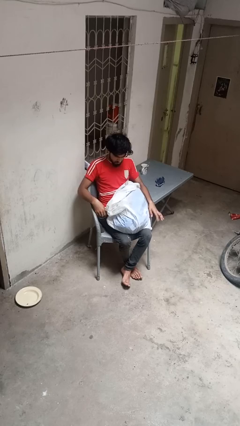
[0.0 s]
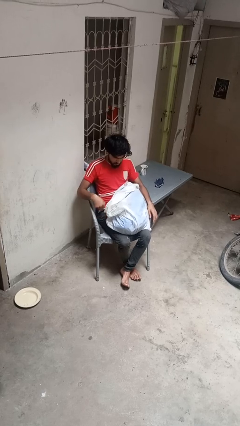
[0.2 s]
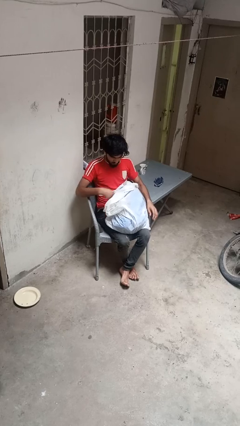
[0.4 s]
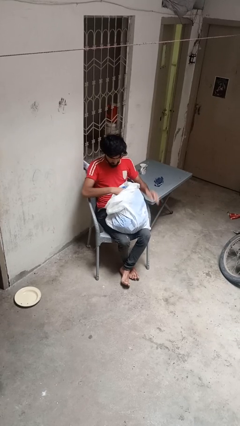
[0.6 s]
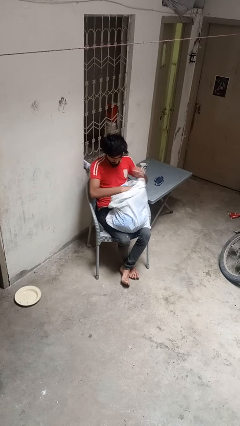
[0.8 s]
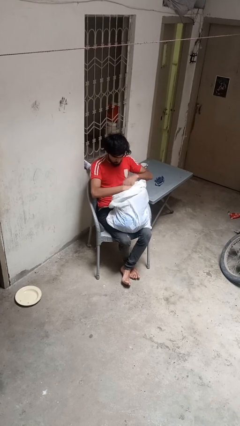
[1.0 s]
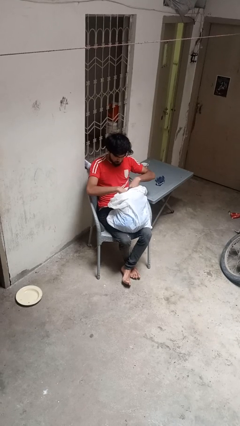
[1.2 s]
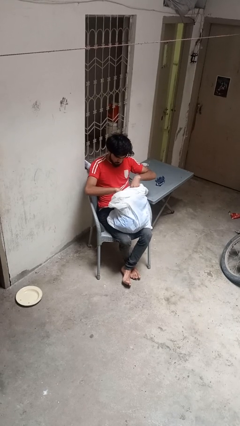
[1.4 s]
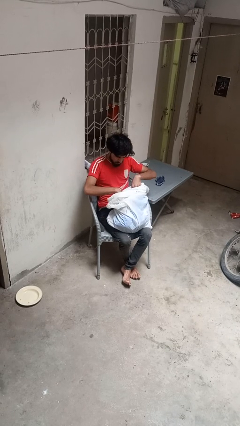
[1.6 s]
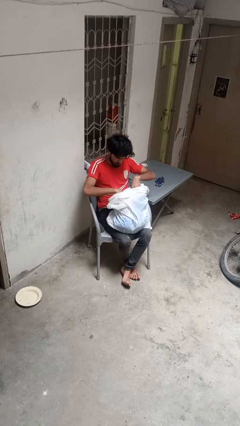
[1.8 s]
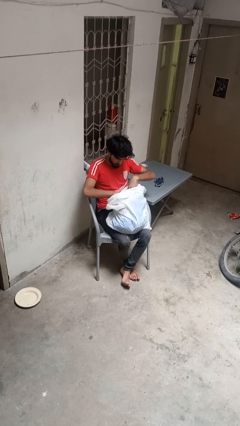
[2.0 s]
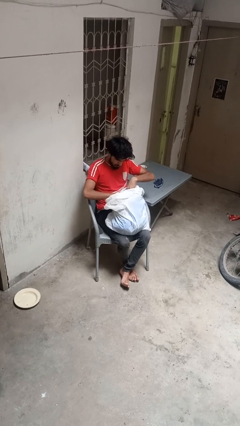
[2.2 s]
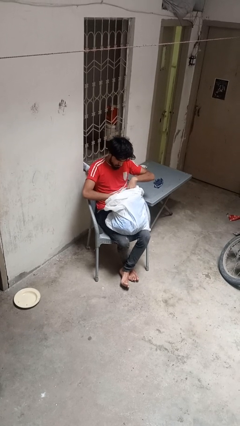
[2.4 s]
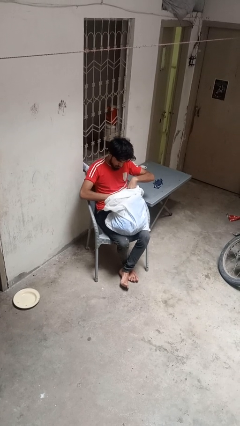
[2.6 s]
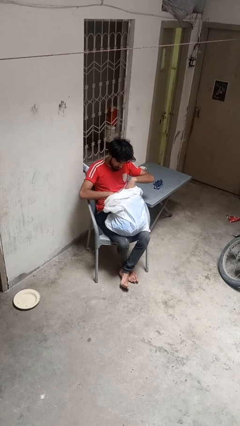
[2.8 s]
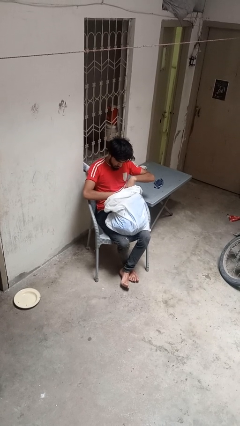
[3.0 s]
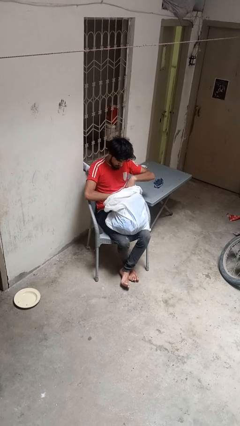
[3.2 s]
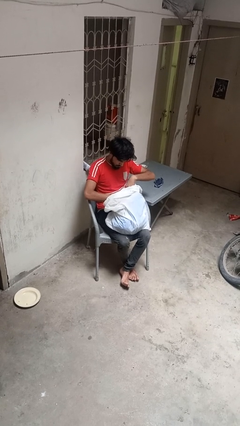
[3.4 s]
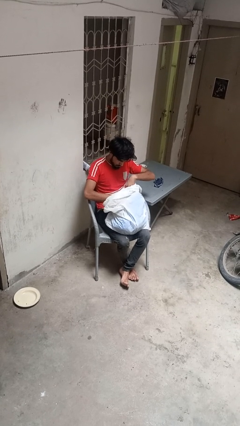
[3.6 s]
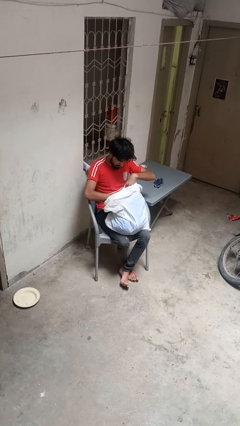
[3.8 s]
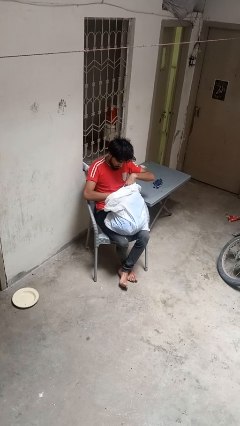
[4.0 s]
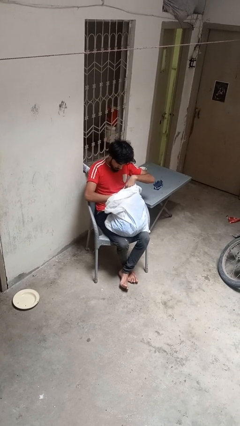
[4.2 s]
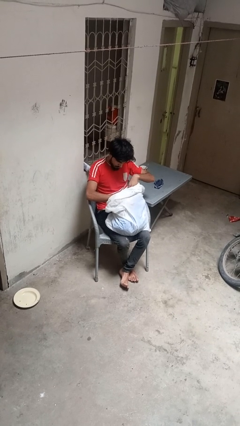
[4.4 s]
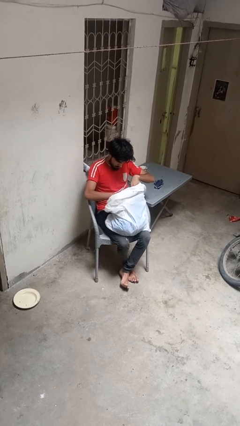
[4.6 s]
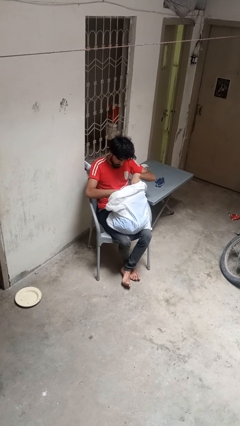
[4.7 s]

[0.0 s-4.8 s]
person searches in bag

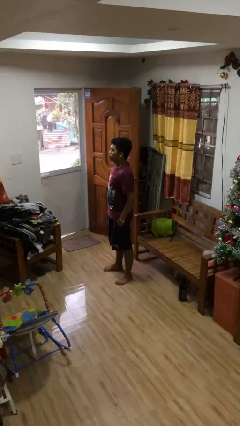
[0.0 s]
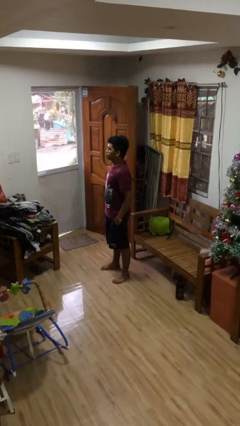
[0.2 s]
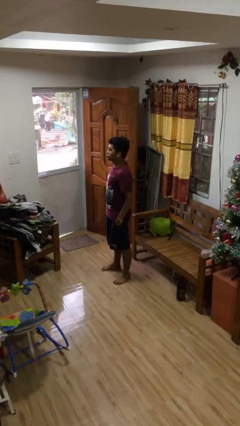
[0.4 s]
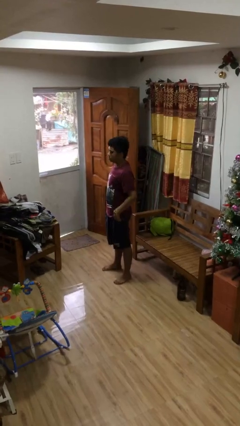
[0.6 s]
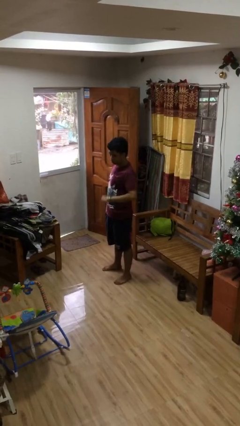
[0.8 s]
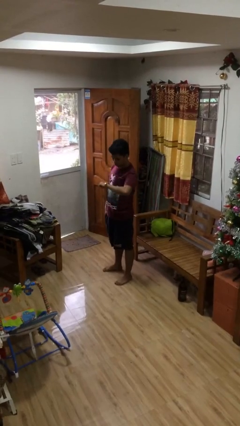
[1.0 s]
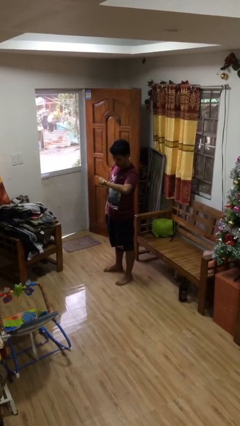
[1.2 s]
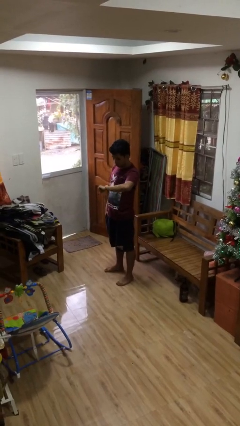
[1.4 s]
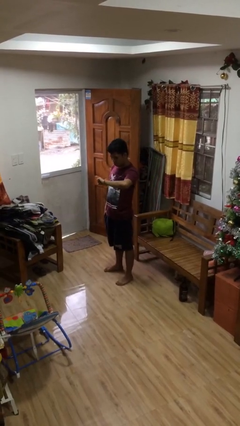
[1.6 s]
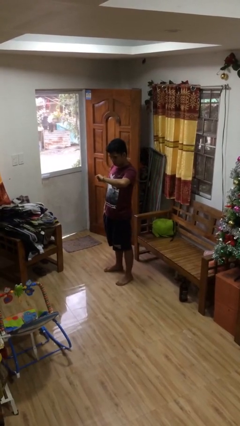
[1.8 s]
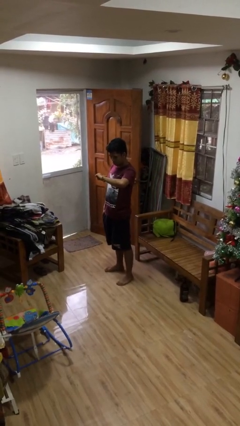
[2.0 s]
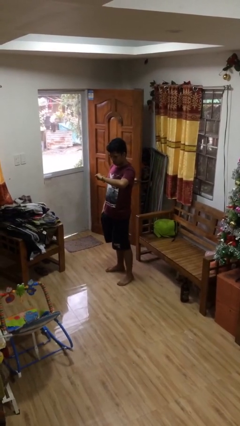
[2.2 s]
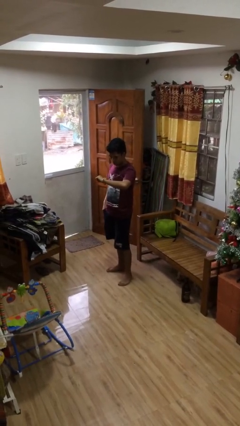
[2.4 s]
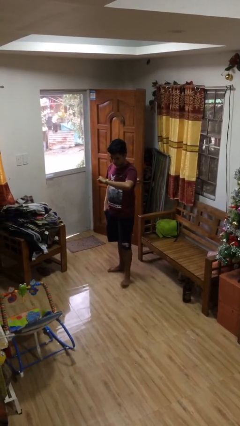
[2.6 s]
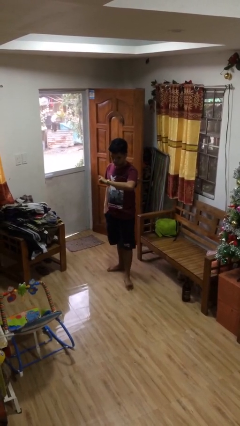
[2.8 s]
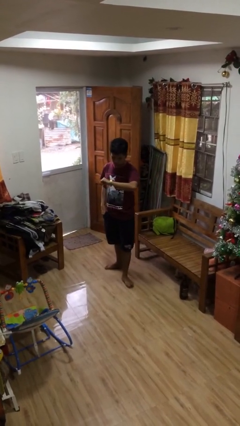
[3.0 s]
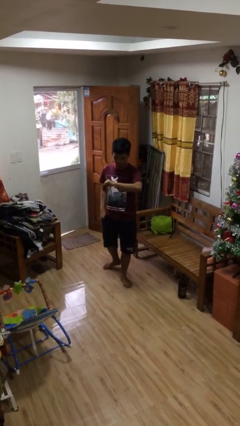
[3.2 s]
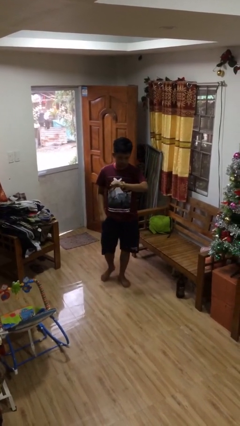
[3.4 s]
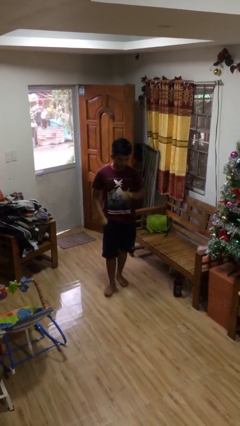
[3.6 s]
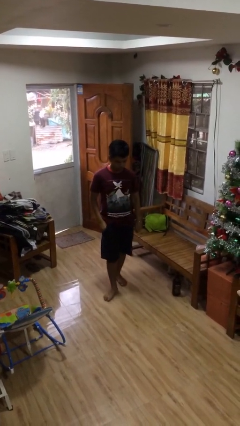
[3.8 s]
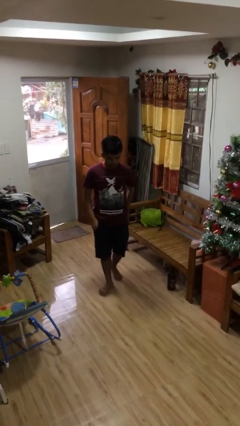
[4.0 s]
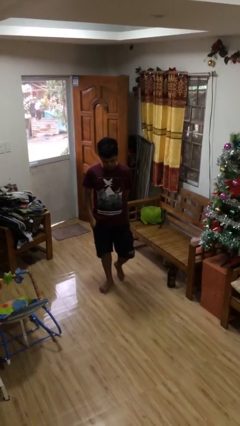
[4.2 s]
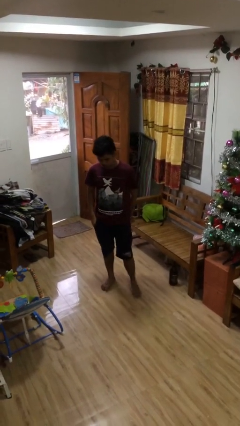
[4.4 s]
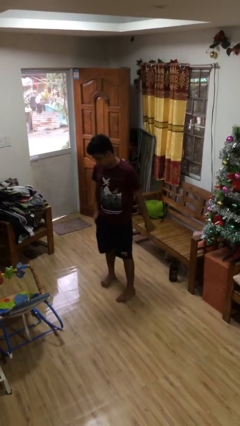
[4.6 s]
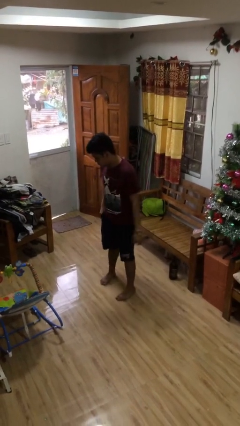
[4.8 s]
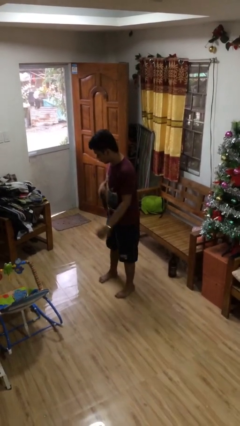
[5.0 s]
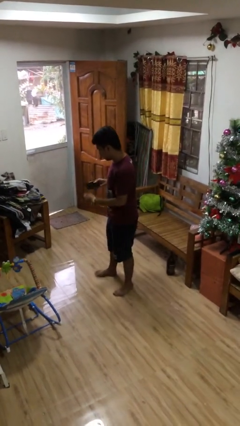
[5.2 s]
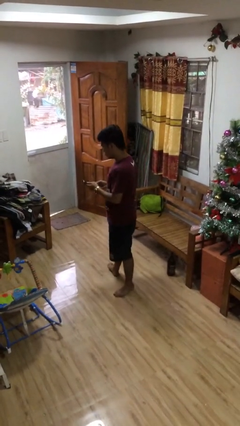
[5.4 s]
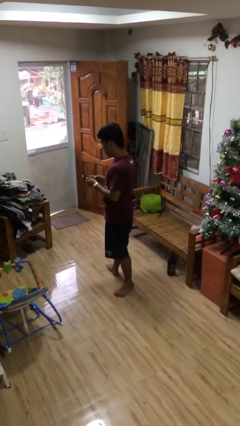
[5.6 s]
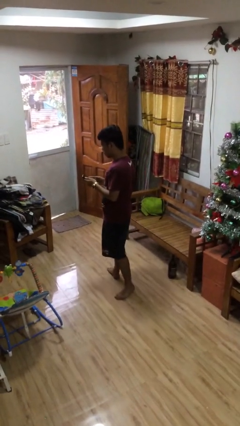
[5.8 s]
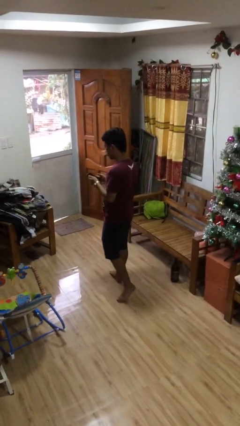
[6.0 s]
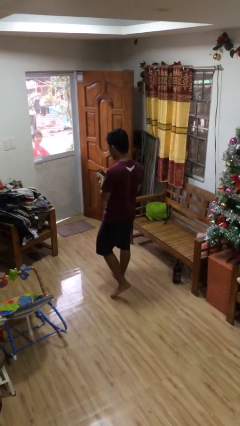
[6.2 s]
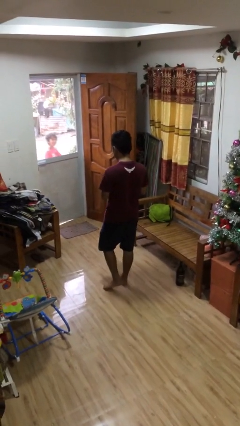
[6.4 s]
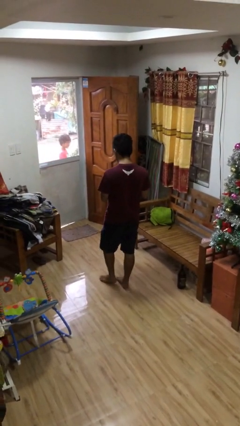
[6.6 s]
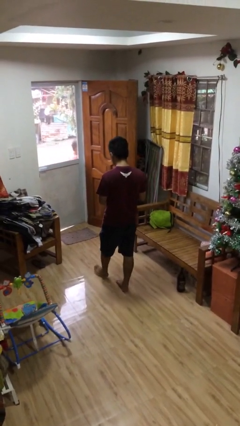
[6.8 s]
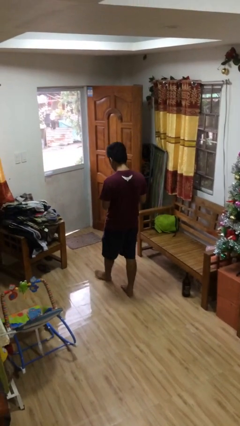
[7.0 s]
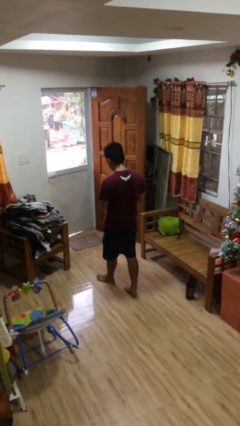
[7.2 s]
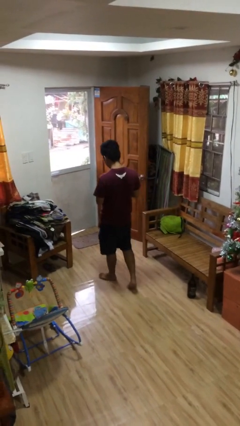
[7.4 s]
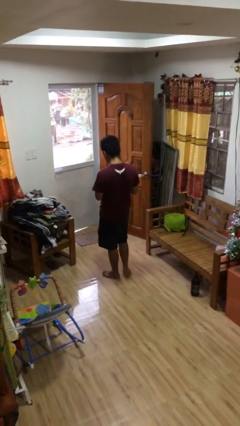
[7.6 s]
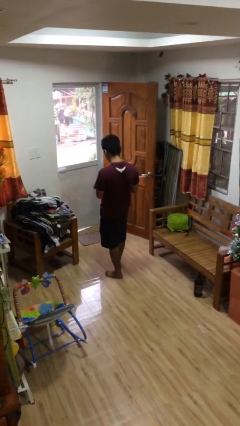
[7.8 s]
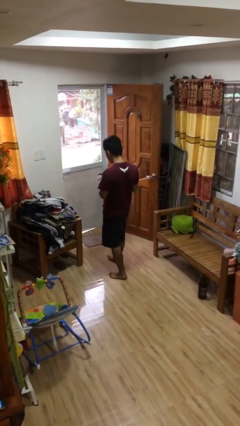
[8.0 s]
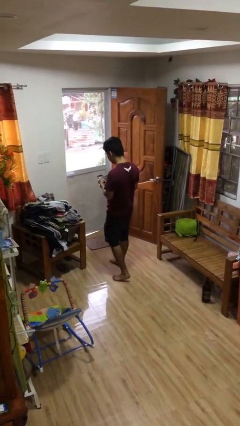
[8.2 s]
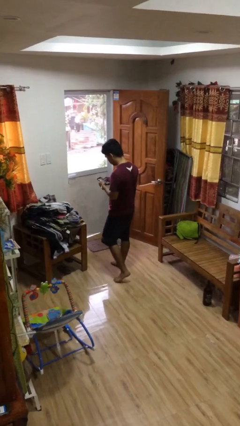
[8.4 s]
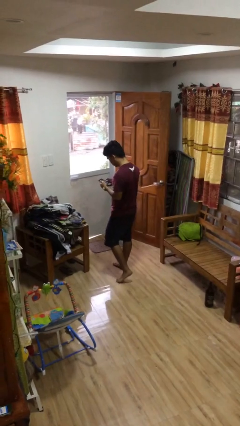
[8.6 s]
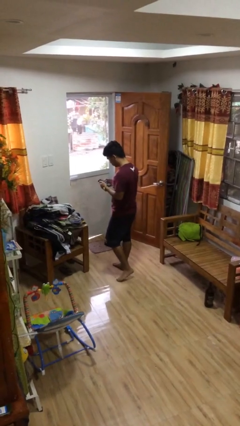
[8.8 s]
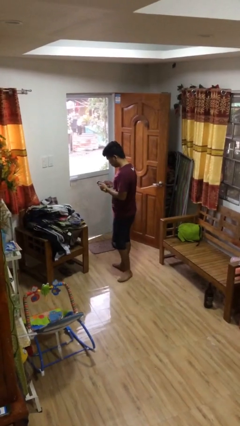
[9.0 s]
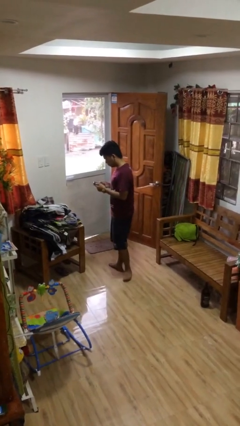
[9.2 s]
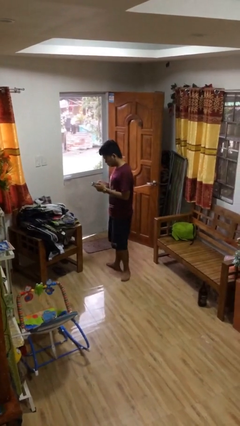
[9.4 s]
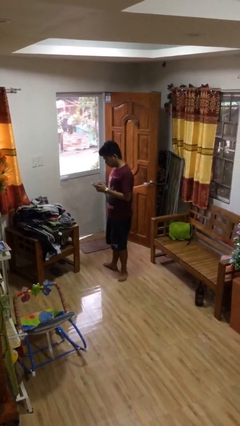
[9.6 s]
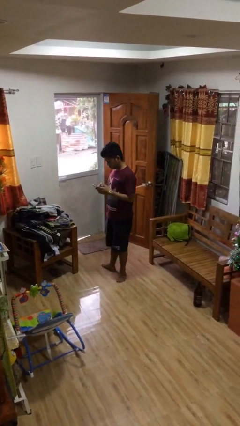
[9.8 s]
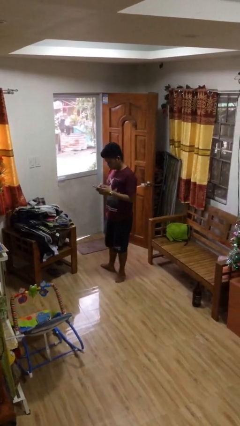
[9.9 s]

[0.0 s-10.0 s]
person walks

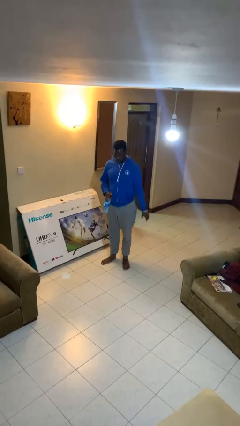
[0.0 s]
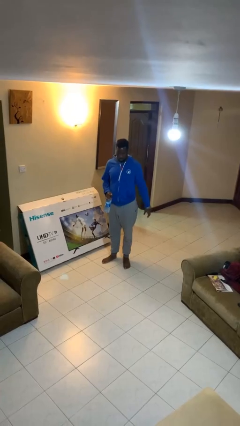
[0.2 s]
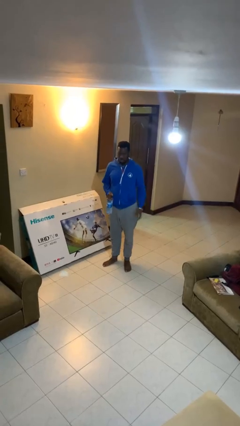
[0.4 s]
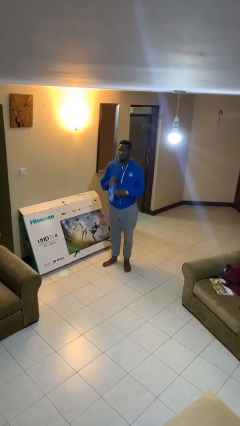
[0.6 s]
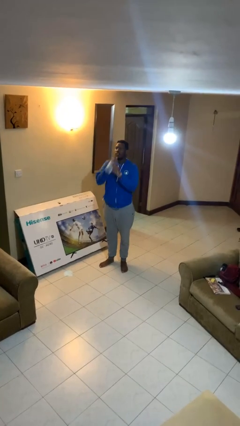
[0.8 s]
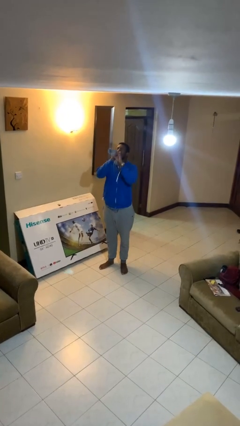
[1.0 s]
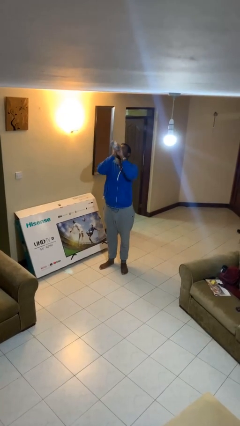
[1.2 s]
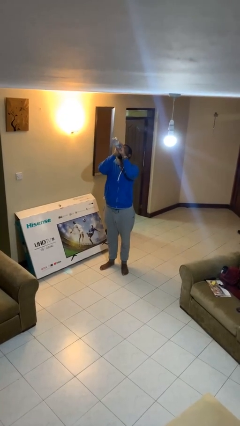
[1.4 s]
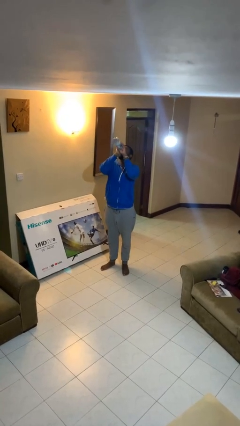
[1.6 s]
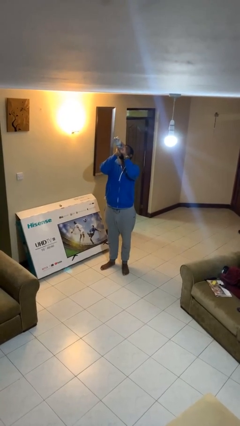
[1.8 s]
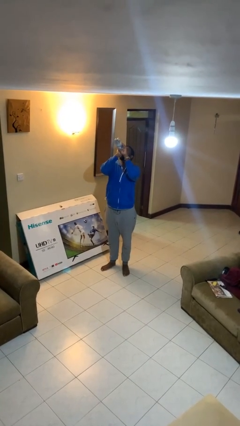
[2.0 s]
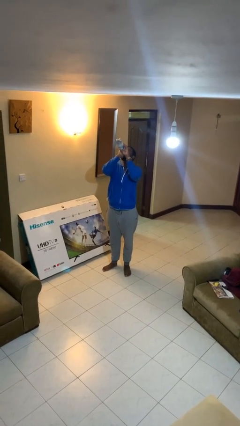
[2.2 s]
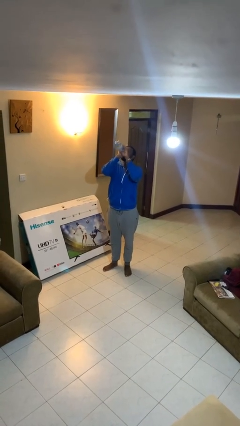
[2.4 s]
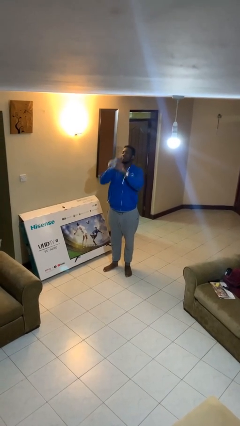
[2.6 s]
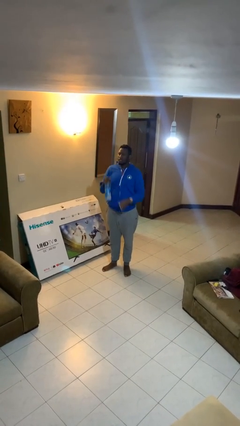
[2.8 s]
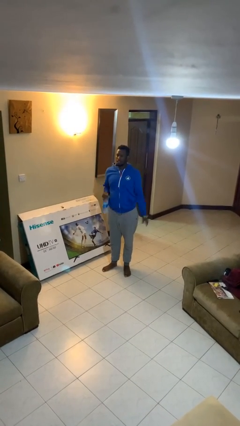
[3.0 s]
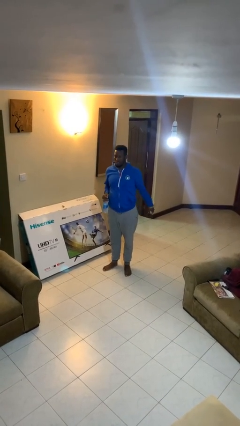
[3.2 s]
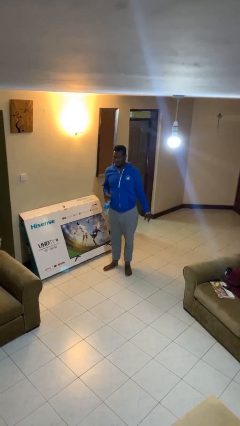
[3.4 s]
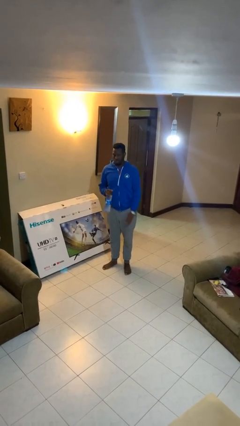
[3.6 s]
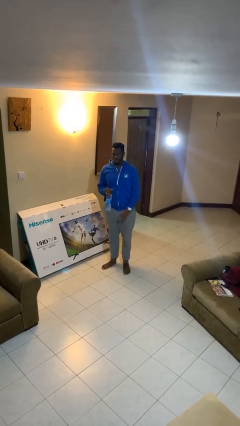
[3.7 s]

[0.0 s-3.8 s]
person drinks from bottle
